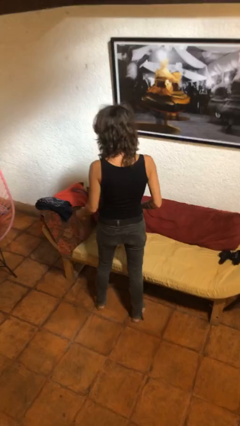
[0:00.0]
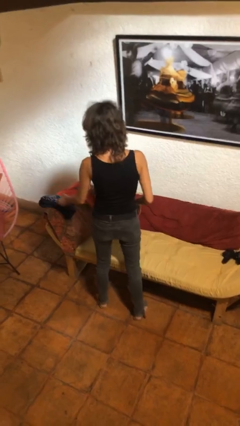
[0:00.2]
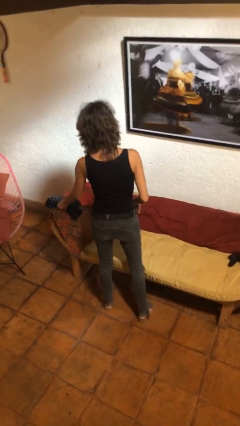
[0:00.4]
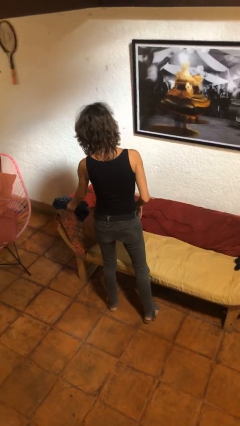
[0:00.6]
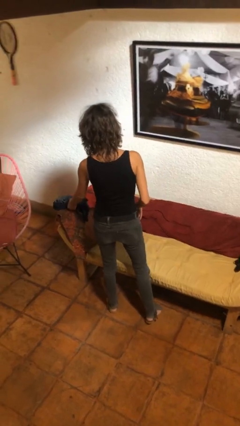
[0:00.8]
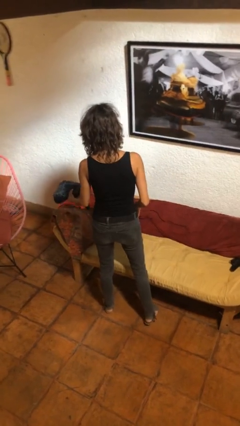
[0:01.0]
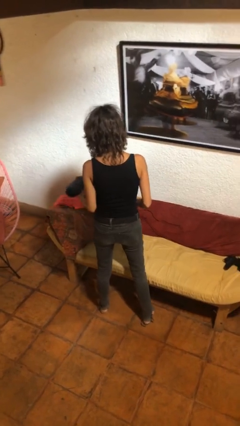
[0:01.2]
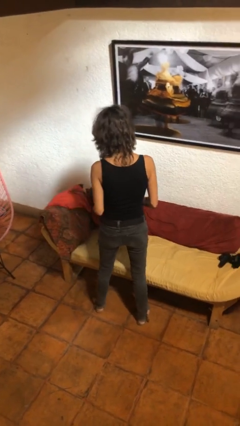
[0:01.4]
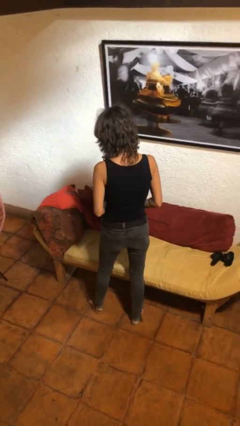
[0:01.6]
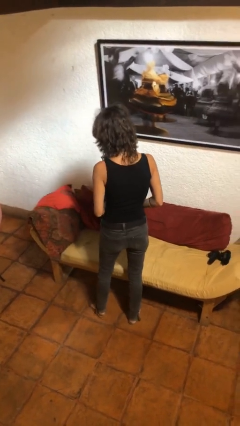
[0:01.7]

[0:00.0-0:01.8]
person picks up object from couch

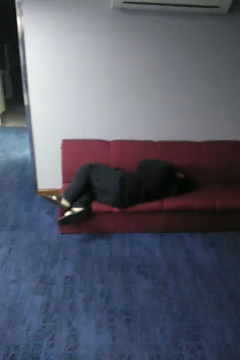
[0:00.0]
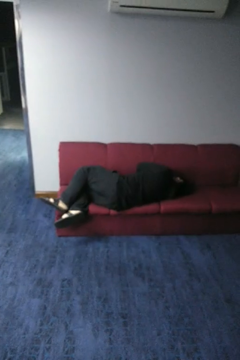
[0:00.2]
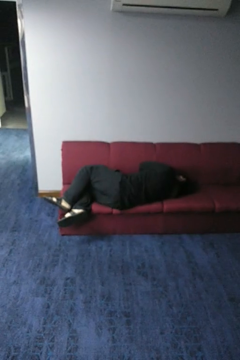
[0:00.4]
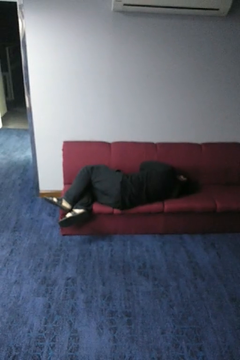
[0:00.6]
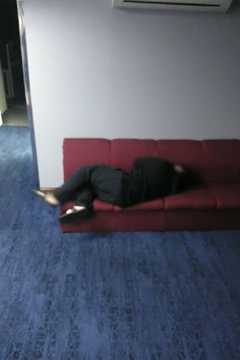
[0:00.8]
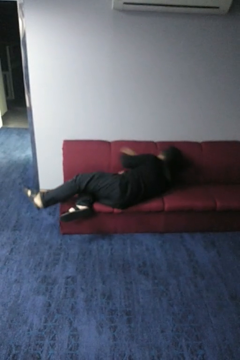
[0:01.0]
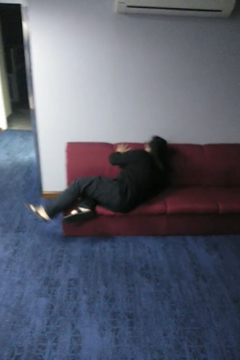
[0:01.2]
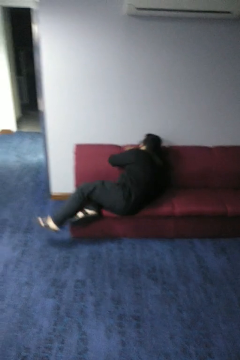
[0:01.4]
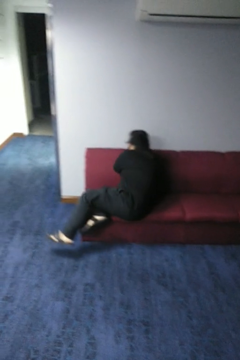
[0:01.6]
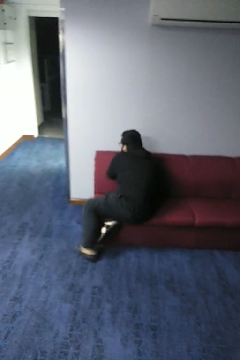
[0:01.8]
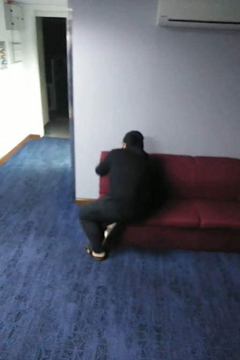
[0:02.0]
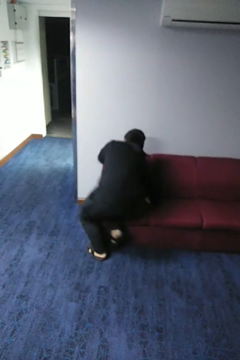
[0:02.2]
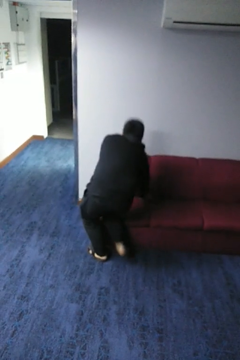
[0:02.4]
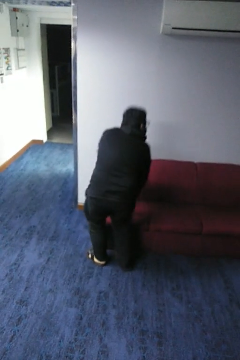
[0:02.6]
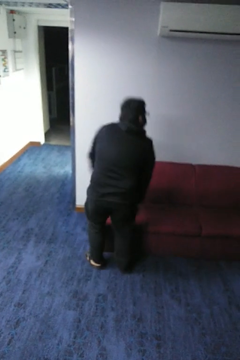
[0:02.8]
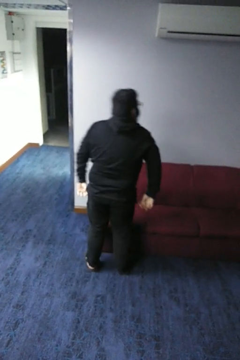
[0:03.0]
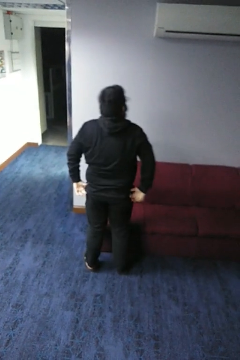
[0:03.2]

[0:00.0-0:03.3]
person stands up

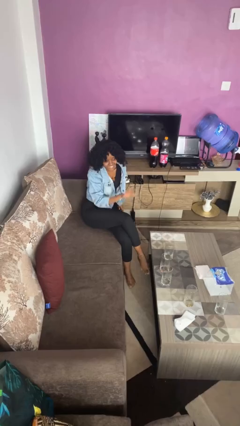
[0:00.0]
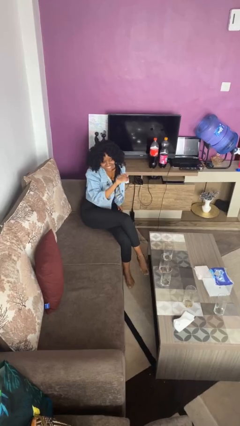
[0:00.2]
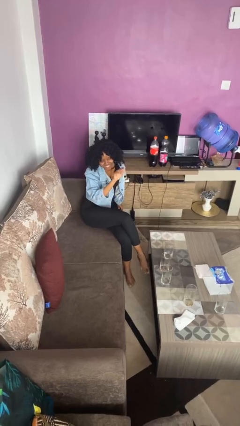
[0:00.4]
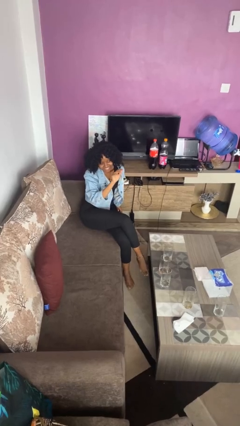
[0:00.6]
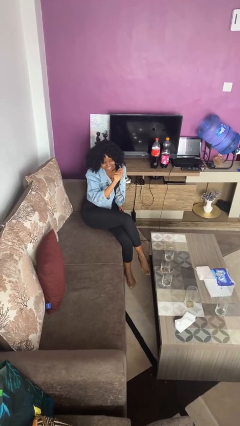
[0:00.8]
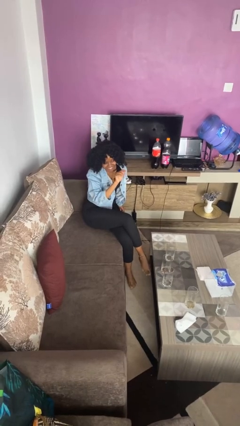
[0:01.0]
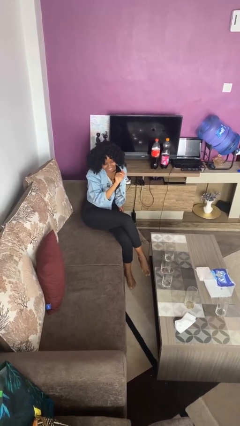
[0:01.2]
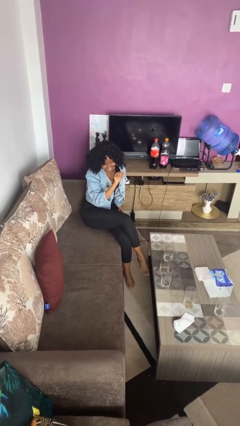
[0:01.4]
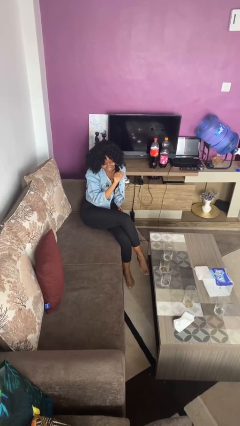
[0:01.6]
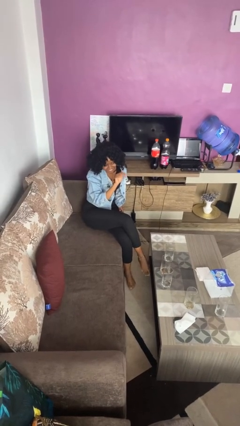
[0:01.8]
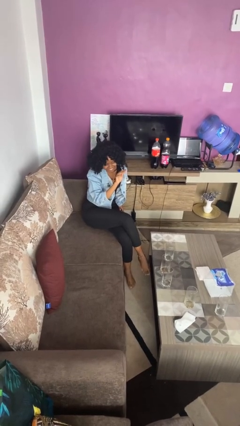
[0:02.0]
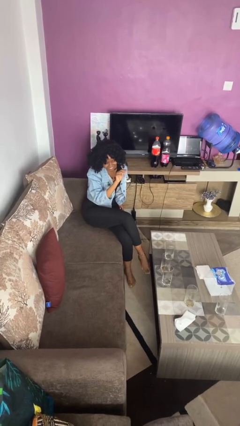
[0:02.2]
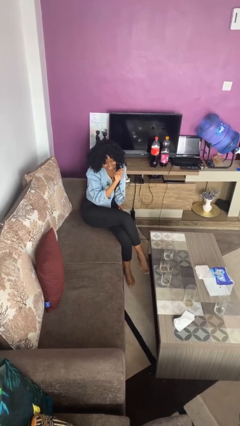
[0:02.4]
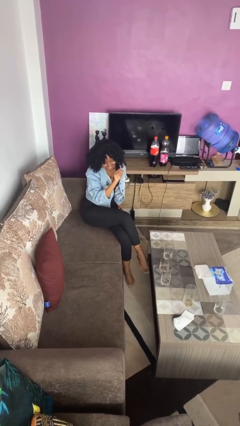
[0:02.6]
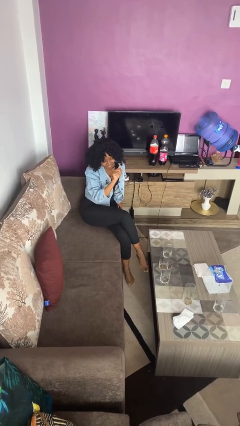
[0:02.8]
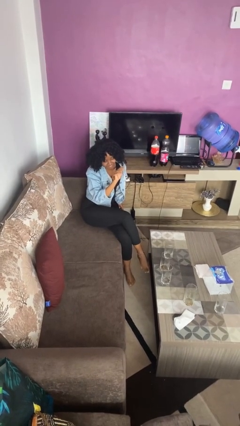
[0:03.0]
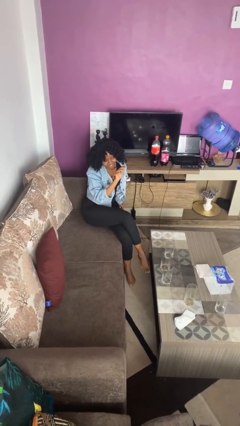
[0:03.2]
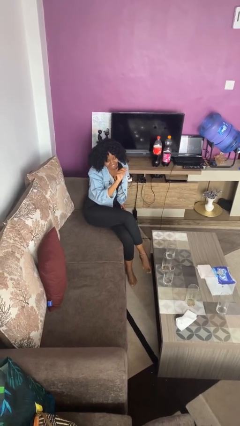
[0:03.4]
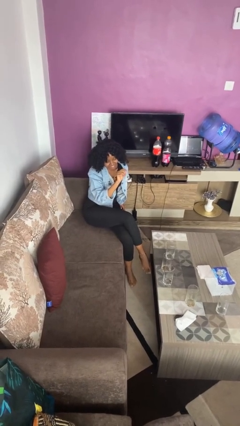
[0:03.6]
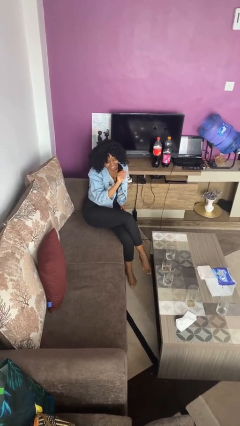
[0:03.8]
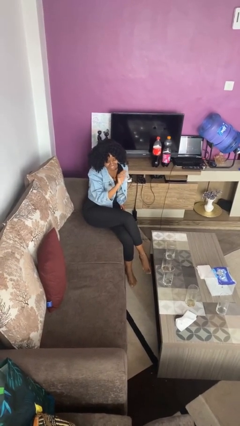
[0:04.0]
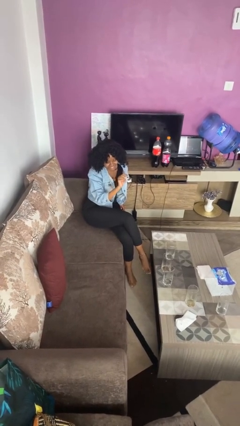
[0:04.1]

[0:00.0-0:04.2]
person gestures come here

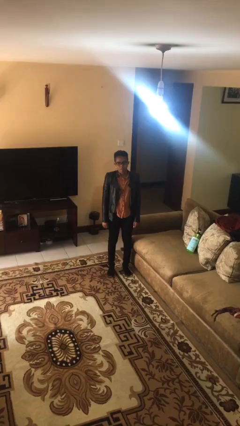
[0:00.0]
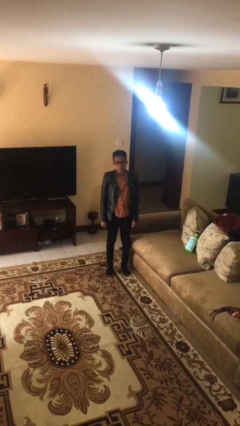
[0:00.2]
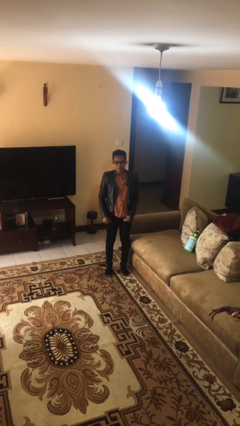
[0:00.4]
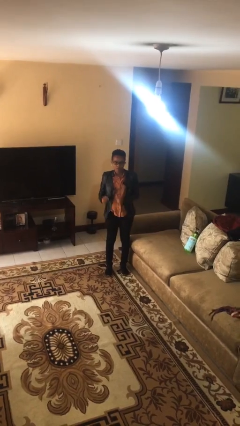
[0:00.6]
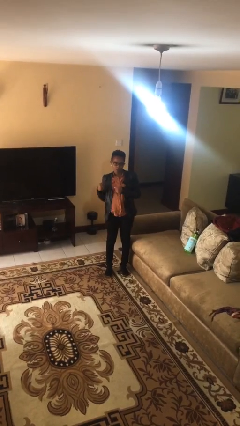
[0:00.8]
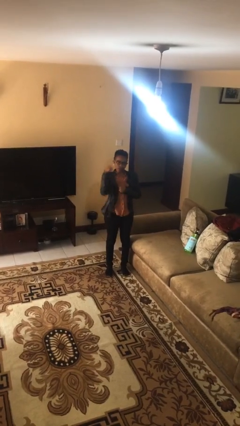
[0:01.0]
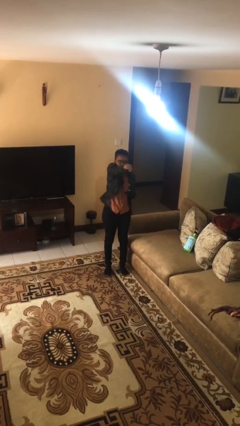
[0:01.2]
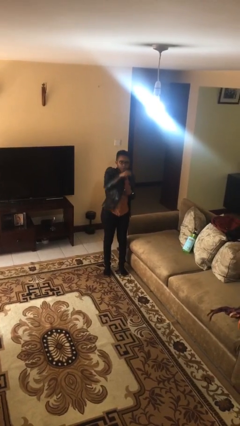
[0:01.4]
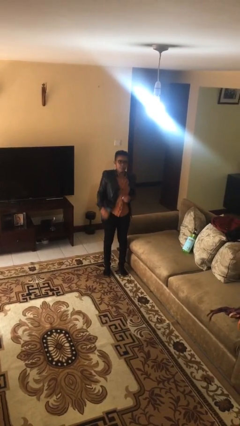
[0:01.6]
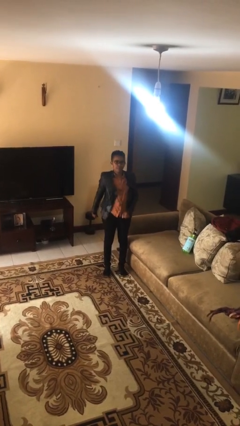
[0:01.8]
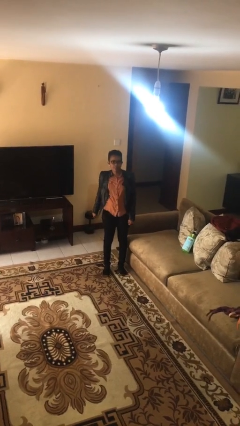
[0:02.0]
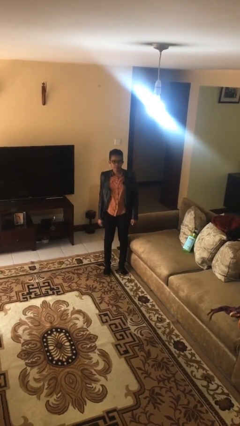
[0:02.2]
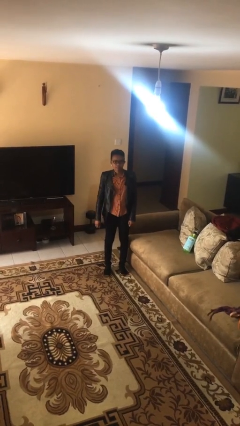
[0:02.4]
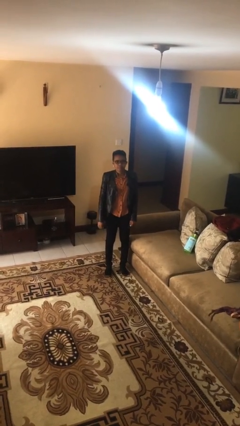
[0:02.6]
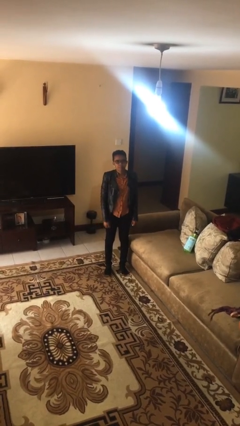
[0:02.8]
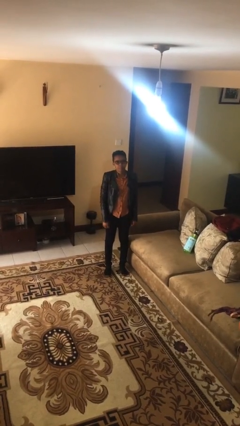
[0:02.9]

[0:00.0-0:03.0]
person punches

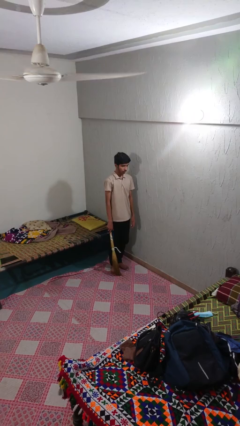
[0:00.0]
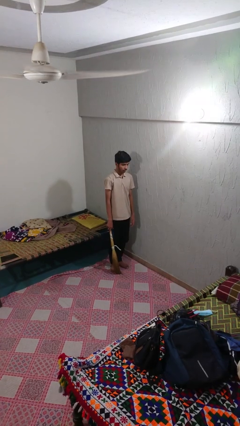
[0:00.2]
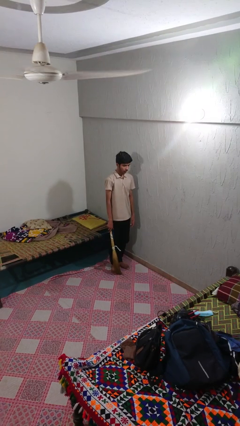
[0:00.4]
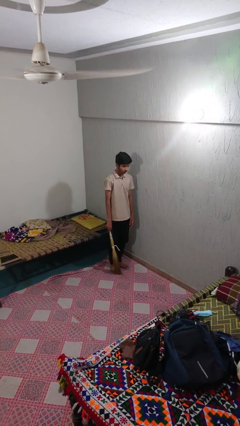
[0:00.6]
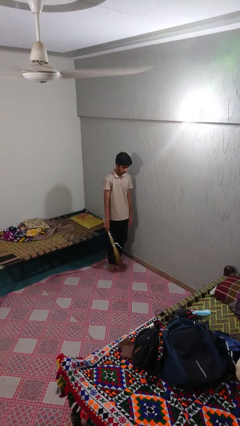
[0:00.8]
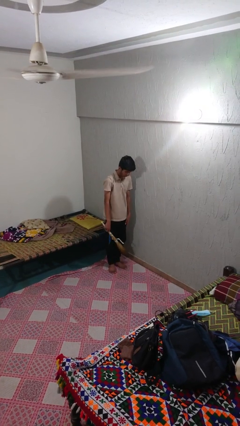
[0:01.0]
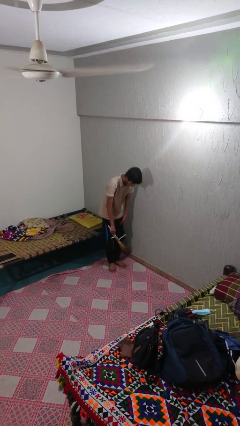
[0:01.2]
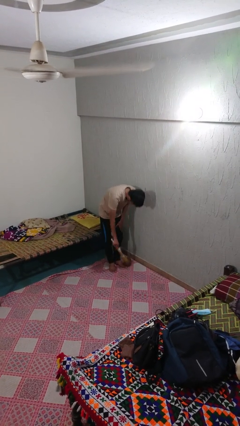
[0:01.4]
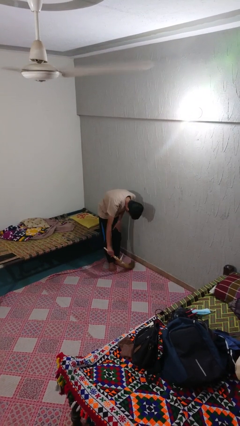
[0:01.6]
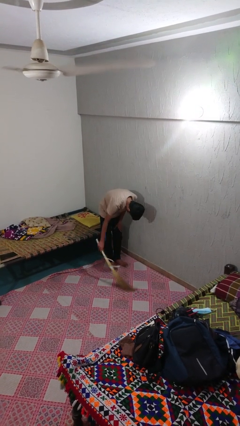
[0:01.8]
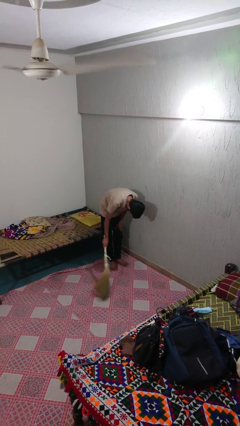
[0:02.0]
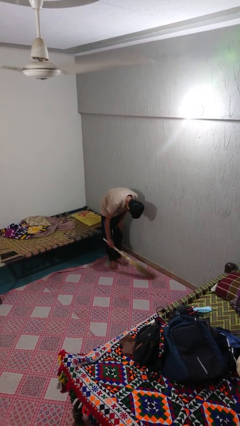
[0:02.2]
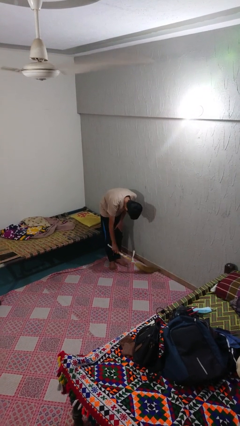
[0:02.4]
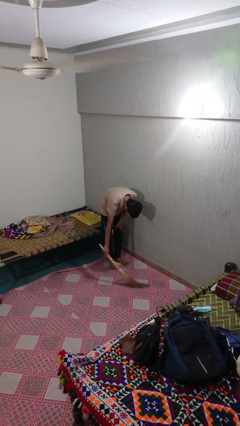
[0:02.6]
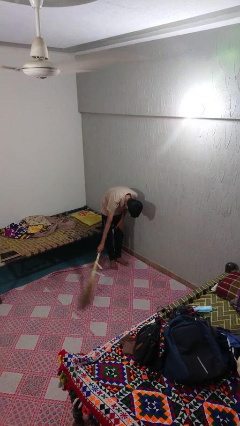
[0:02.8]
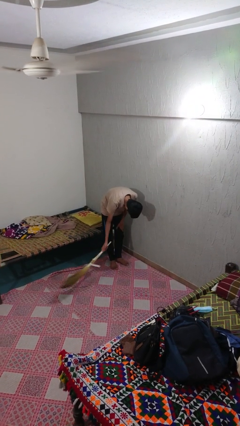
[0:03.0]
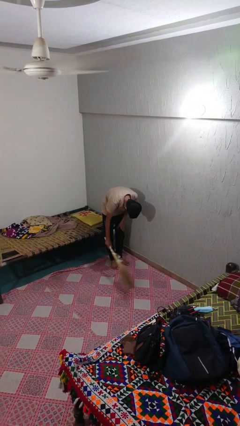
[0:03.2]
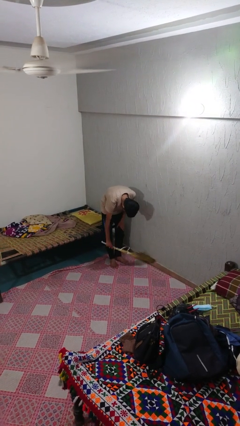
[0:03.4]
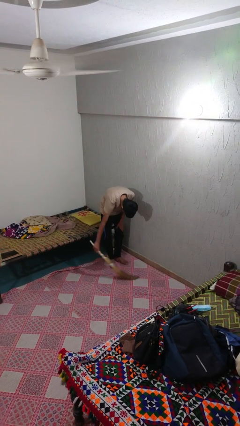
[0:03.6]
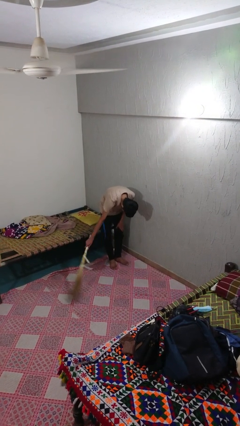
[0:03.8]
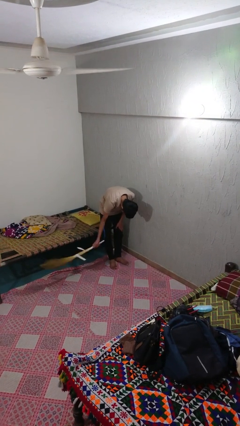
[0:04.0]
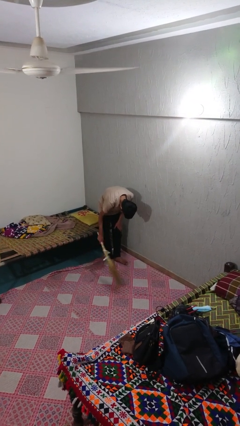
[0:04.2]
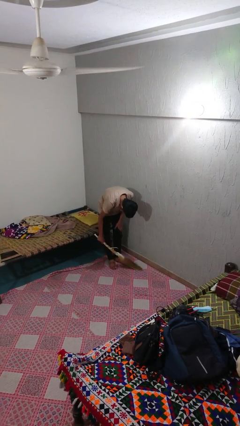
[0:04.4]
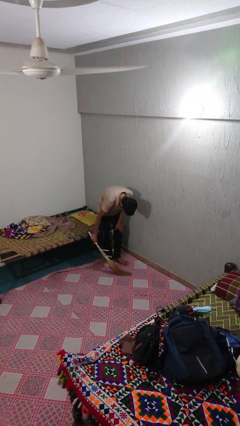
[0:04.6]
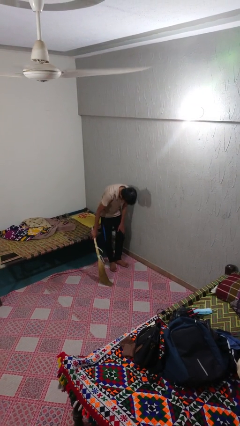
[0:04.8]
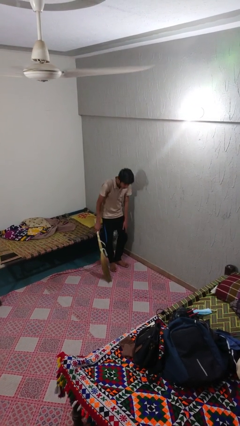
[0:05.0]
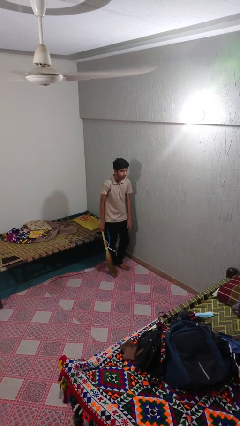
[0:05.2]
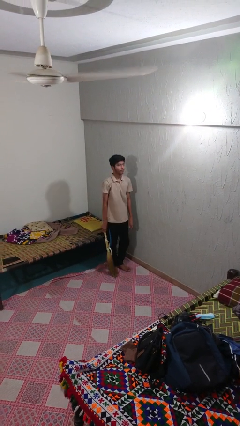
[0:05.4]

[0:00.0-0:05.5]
person sweeps floor

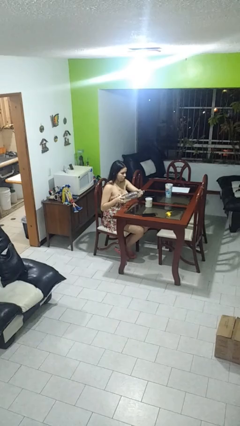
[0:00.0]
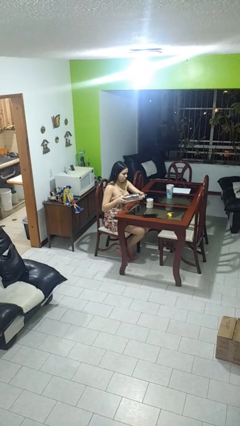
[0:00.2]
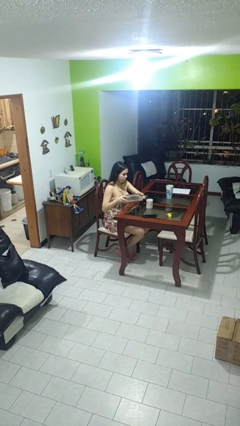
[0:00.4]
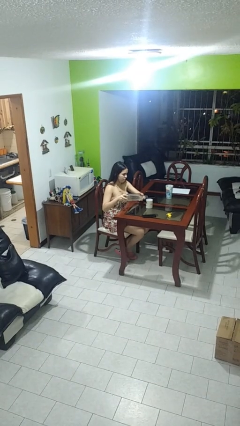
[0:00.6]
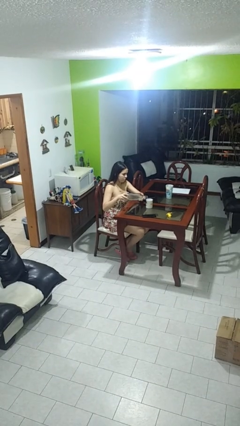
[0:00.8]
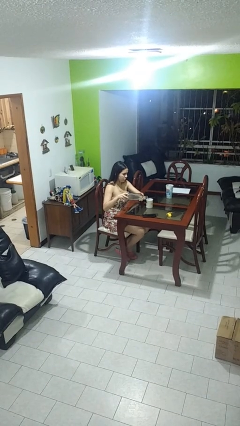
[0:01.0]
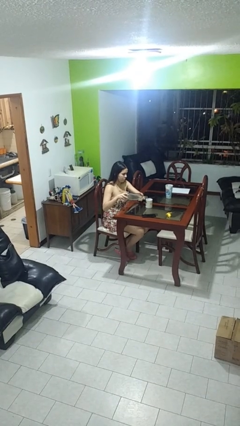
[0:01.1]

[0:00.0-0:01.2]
person pours liquid into cup
